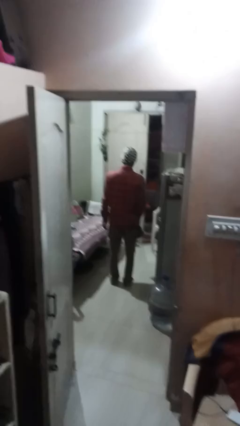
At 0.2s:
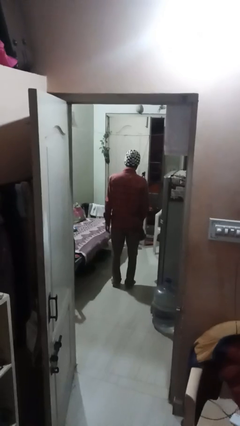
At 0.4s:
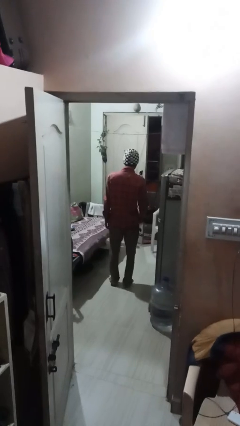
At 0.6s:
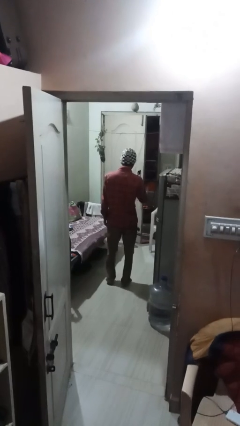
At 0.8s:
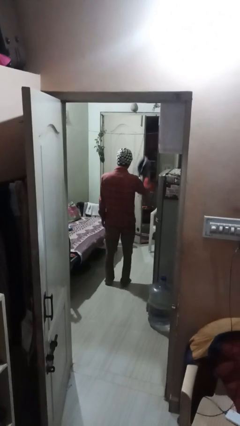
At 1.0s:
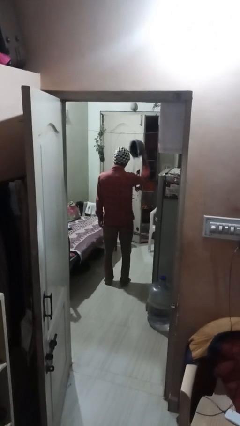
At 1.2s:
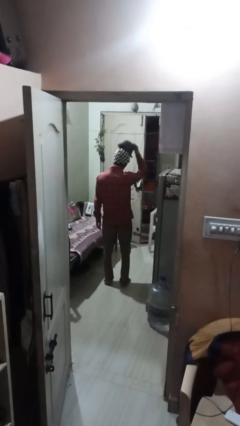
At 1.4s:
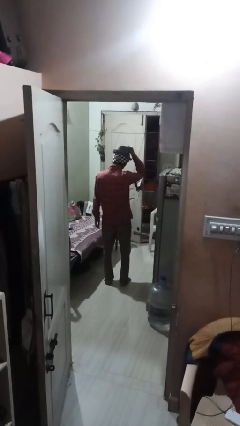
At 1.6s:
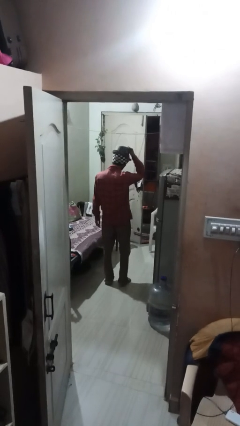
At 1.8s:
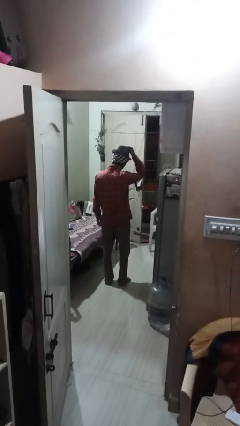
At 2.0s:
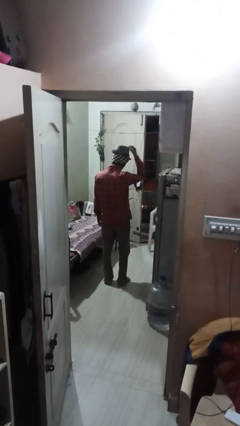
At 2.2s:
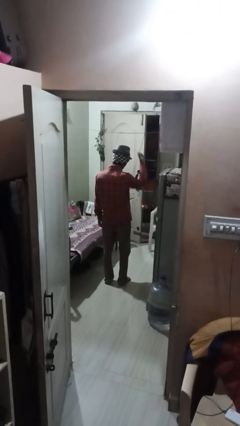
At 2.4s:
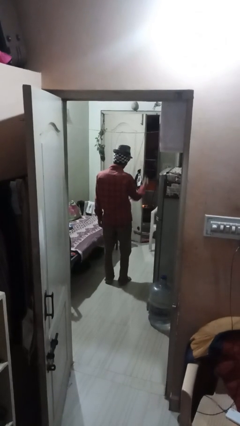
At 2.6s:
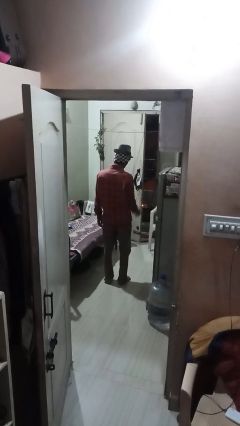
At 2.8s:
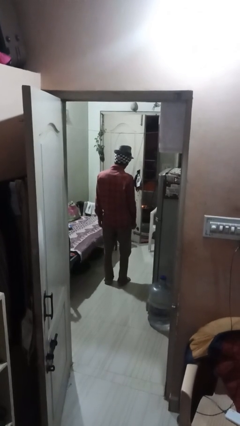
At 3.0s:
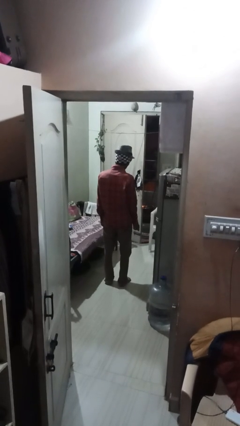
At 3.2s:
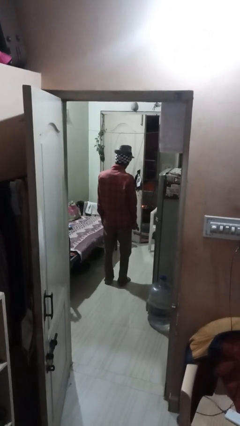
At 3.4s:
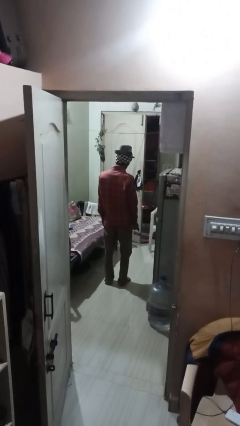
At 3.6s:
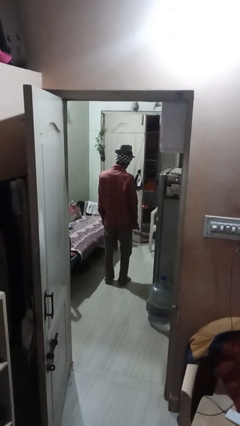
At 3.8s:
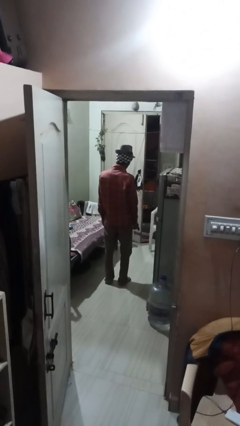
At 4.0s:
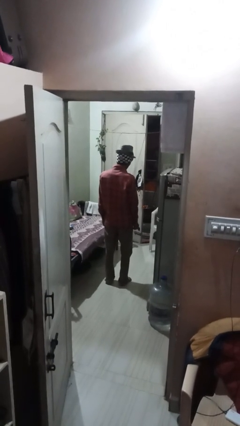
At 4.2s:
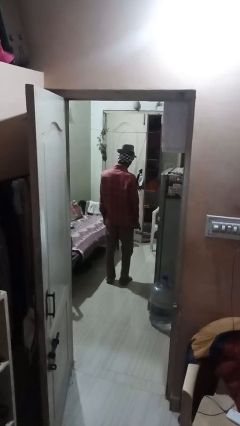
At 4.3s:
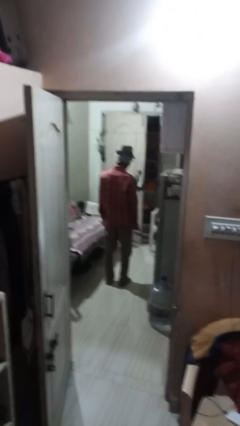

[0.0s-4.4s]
person puts on hat

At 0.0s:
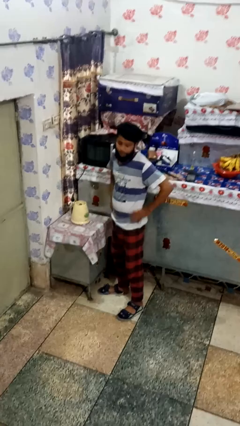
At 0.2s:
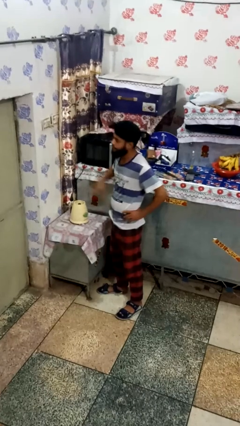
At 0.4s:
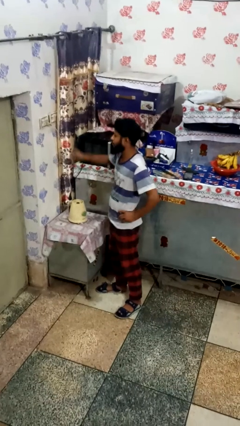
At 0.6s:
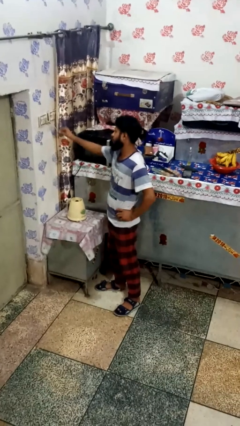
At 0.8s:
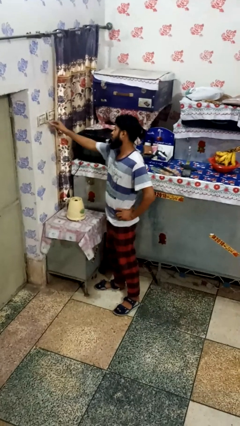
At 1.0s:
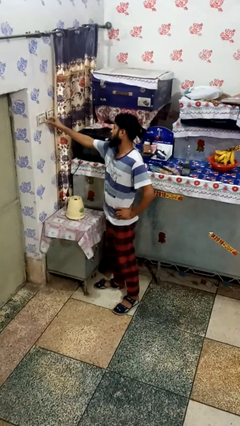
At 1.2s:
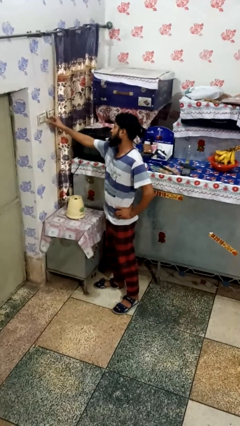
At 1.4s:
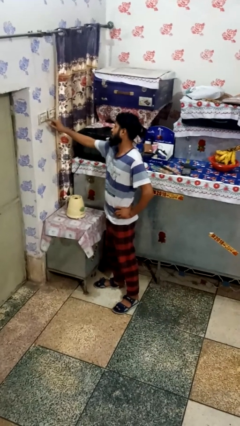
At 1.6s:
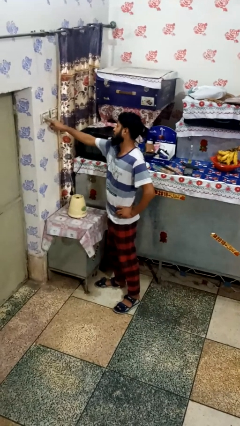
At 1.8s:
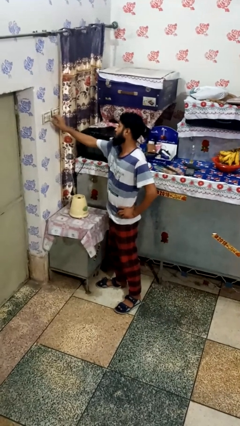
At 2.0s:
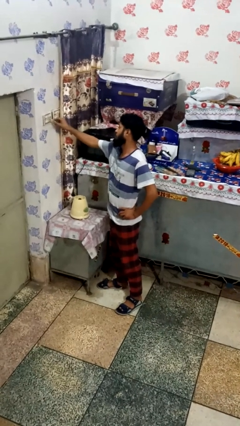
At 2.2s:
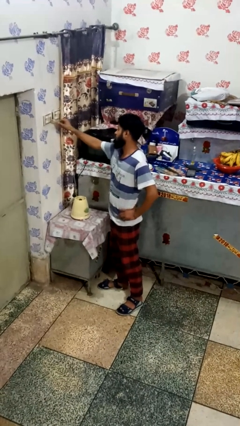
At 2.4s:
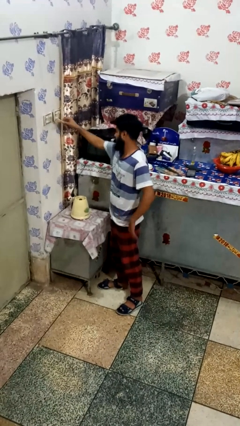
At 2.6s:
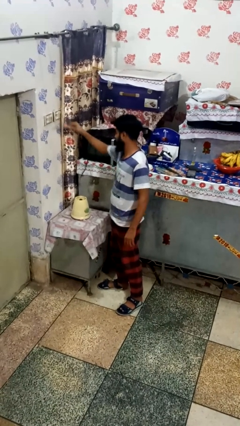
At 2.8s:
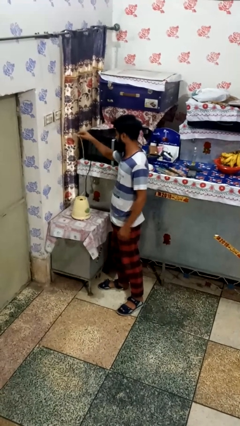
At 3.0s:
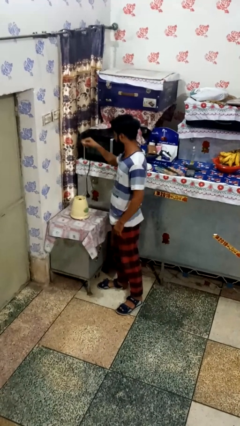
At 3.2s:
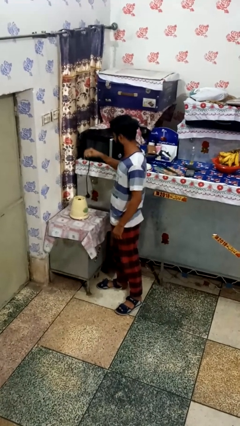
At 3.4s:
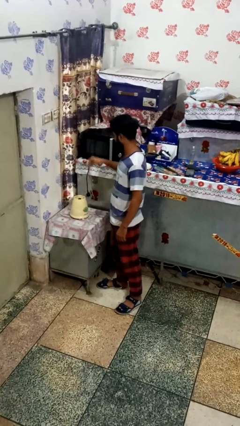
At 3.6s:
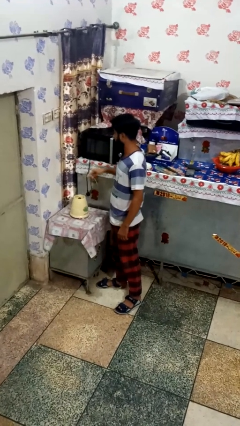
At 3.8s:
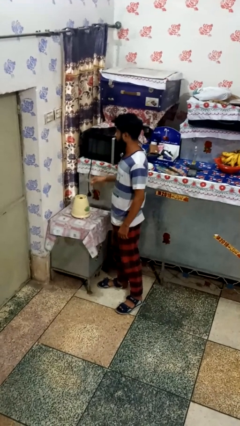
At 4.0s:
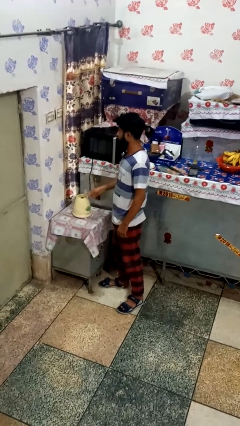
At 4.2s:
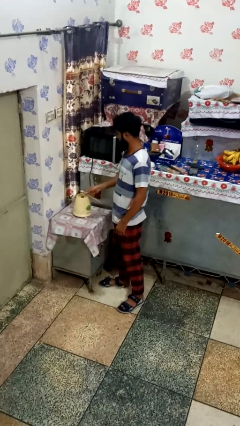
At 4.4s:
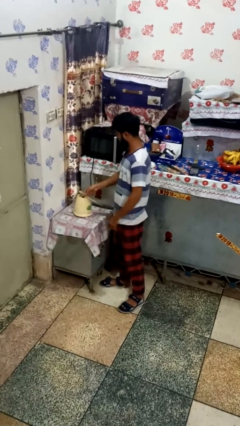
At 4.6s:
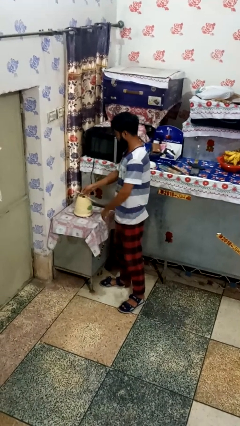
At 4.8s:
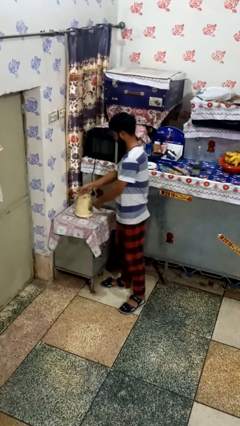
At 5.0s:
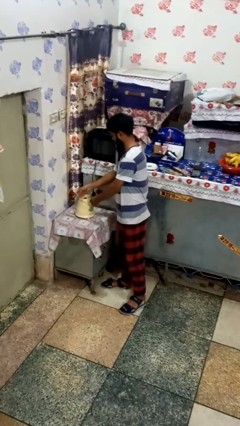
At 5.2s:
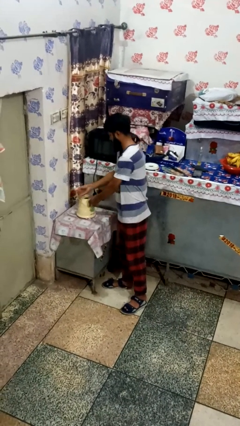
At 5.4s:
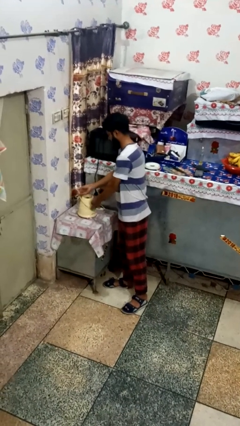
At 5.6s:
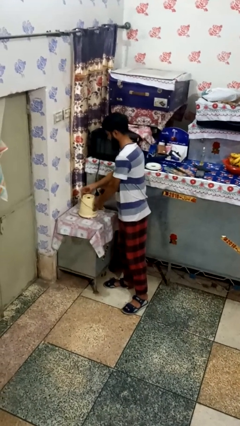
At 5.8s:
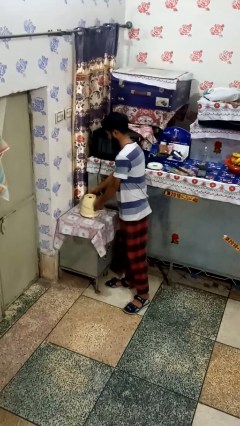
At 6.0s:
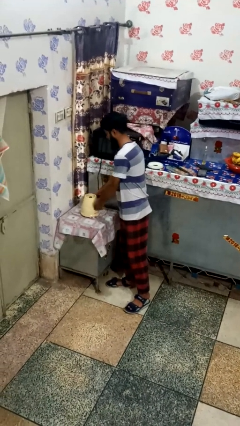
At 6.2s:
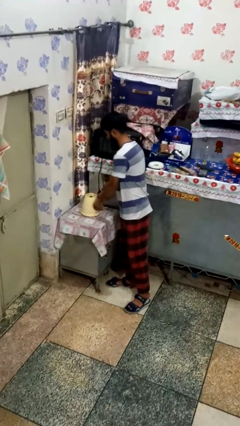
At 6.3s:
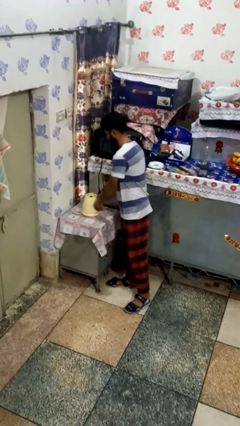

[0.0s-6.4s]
person unplugs from electrical socket

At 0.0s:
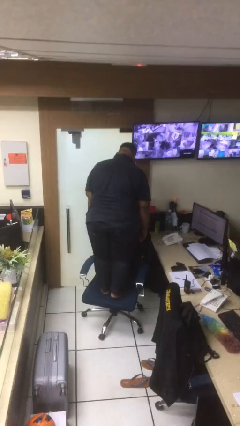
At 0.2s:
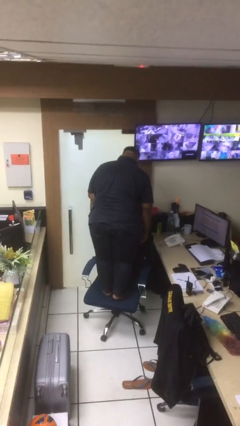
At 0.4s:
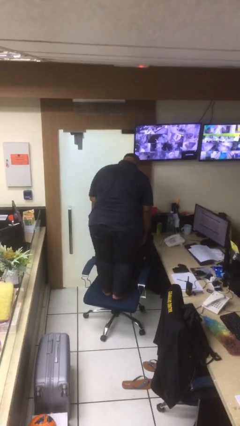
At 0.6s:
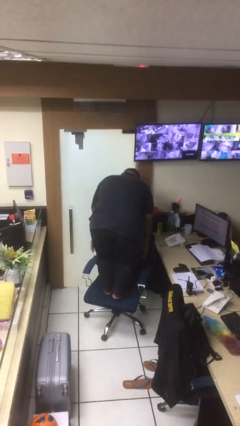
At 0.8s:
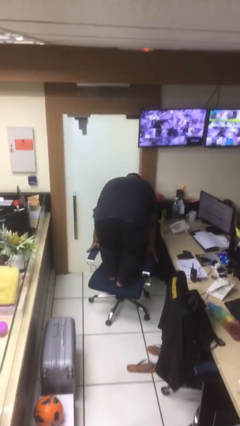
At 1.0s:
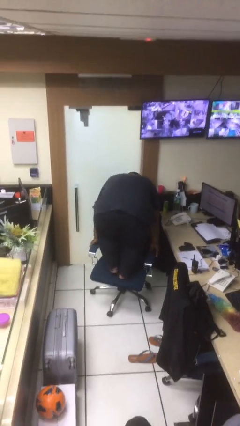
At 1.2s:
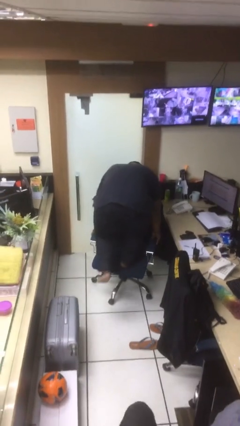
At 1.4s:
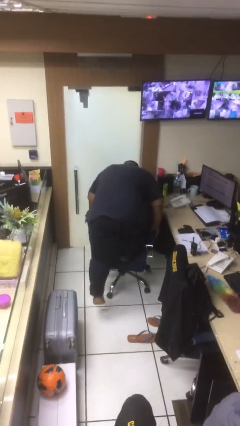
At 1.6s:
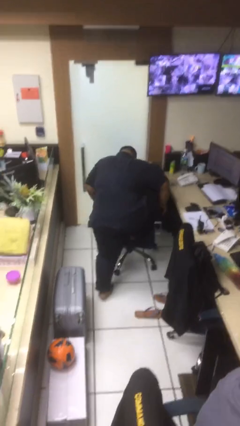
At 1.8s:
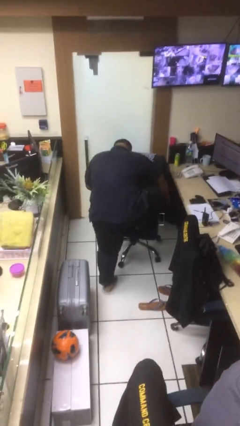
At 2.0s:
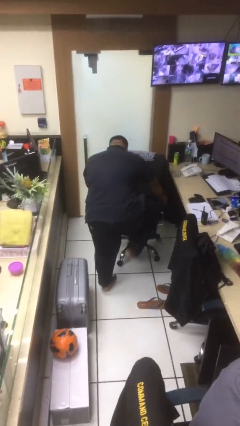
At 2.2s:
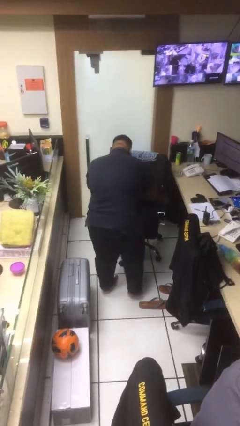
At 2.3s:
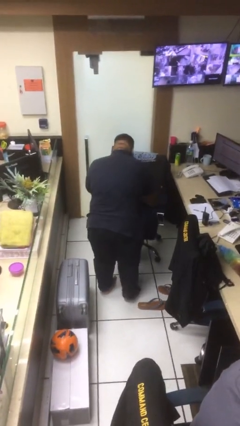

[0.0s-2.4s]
person climbs off chair

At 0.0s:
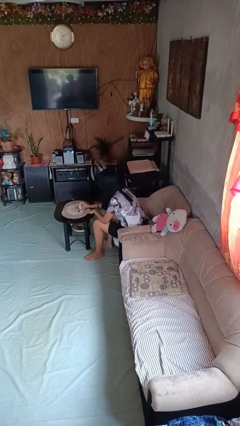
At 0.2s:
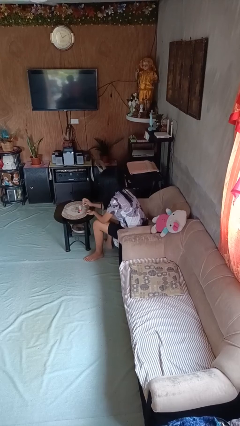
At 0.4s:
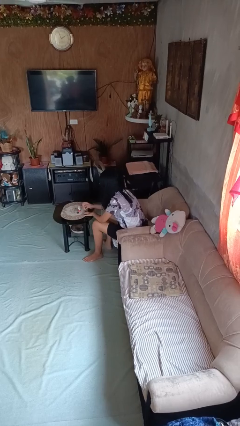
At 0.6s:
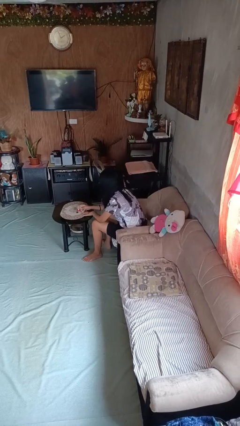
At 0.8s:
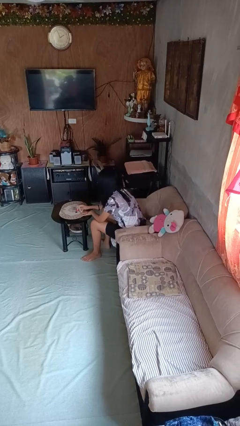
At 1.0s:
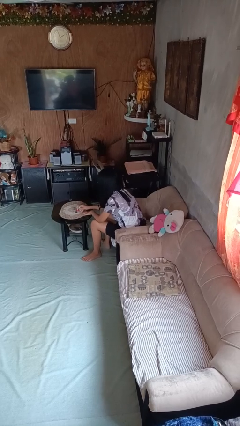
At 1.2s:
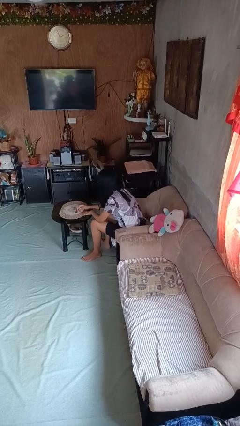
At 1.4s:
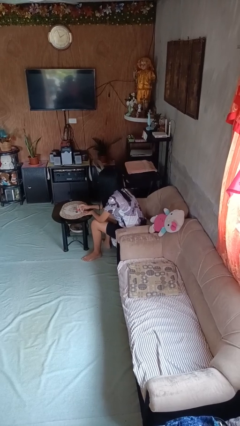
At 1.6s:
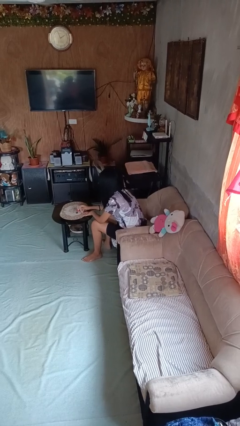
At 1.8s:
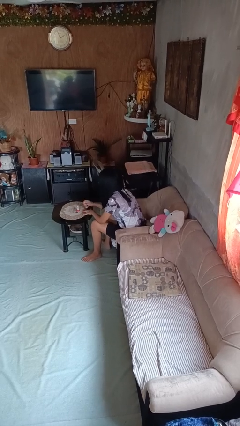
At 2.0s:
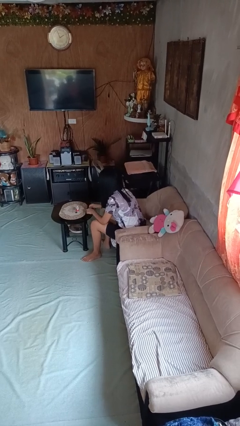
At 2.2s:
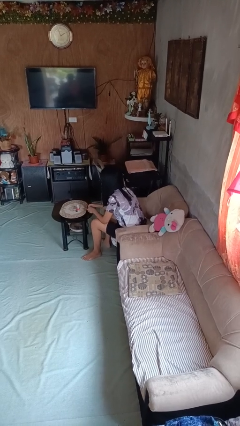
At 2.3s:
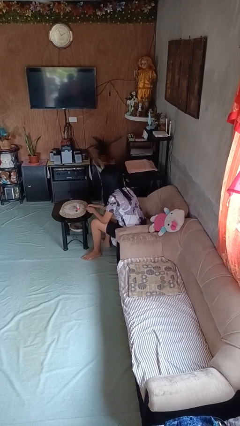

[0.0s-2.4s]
person paints fingernails

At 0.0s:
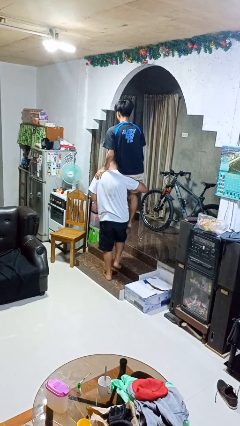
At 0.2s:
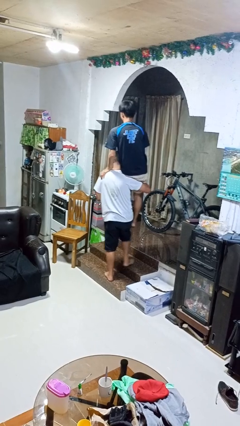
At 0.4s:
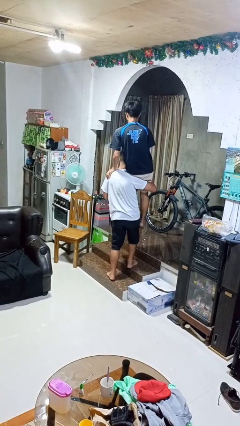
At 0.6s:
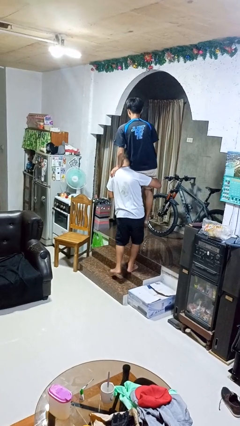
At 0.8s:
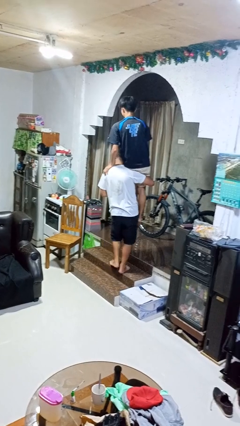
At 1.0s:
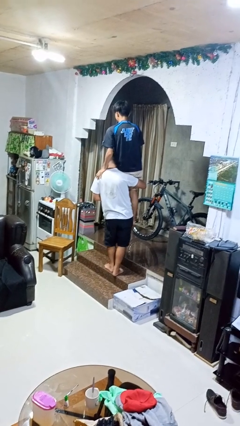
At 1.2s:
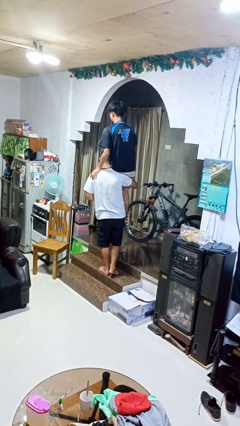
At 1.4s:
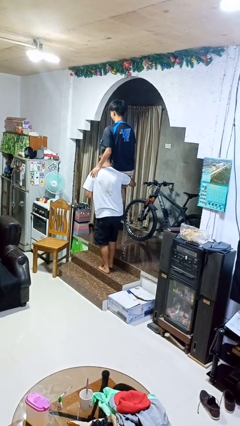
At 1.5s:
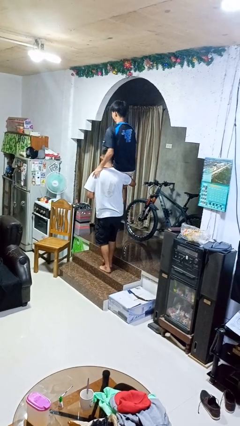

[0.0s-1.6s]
person carries person on shoulders

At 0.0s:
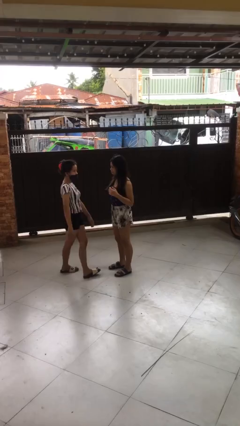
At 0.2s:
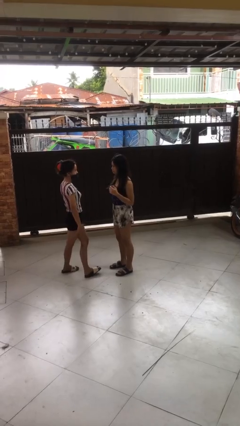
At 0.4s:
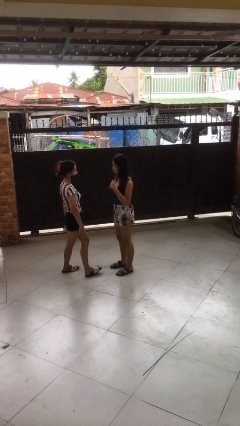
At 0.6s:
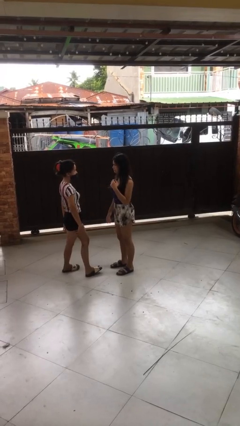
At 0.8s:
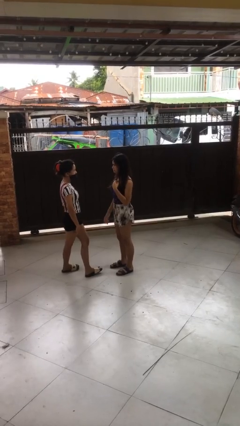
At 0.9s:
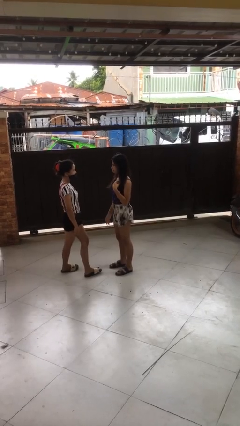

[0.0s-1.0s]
person spins person around
